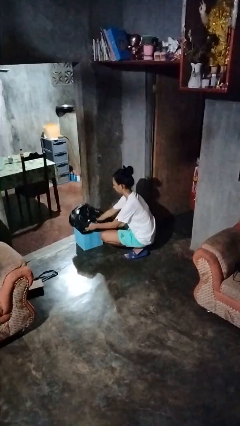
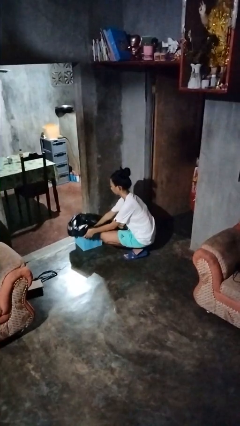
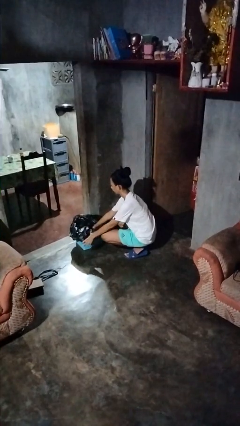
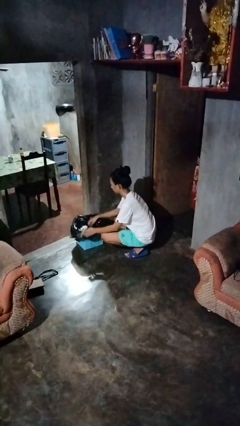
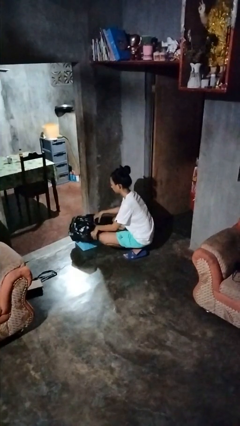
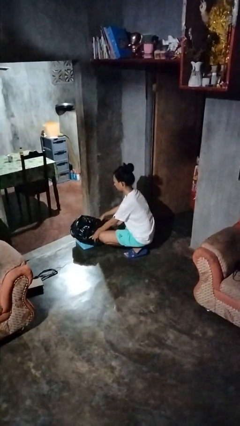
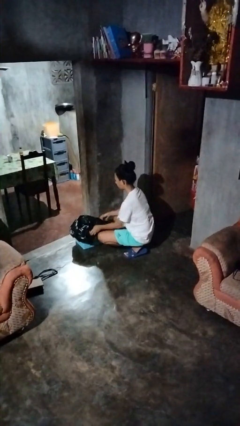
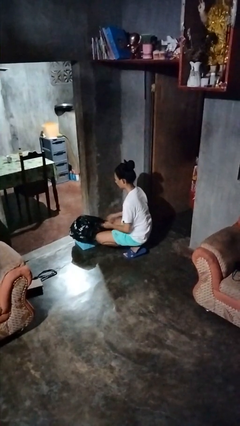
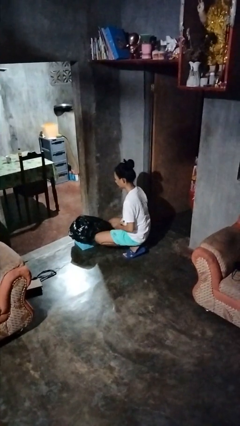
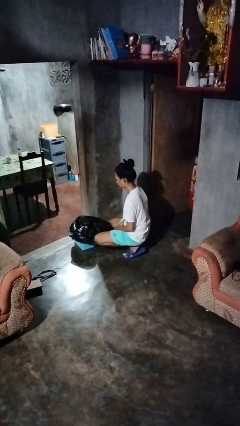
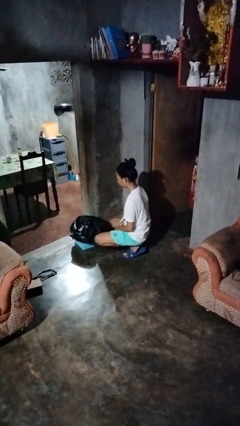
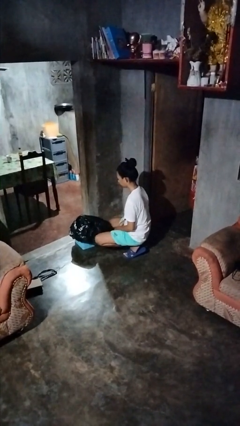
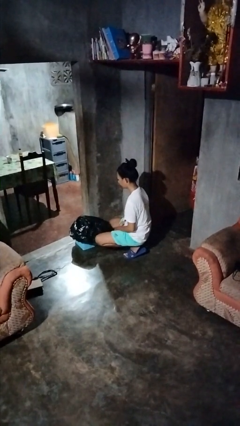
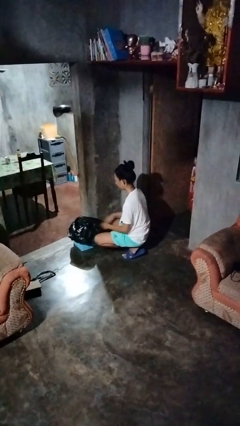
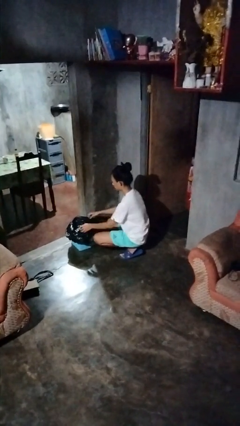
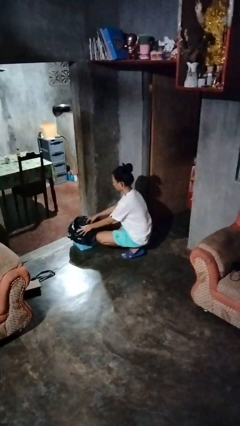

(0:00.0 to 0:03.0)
person inserts trashbag into trashcan

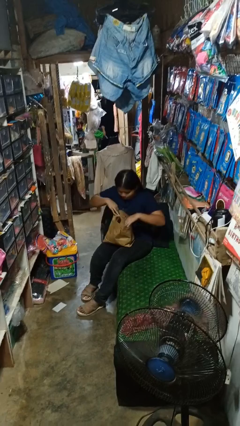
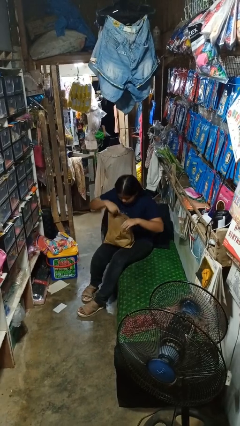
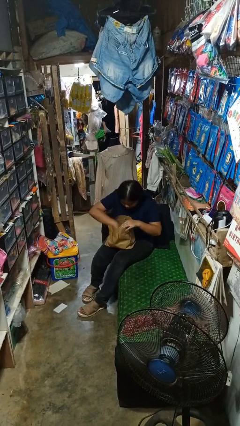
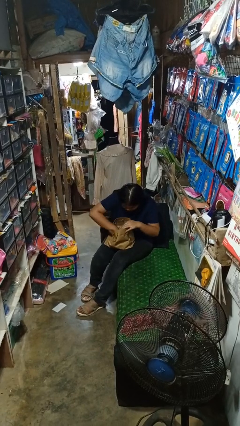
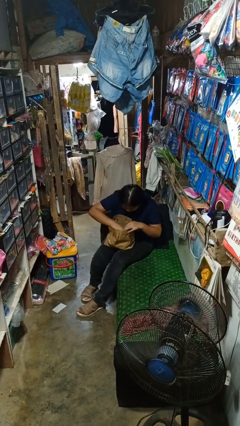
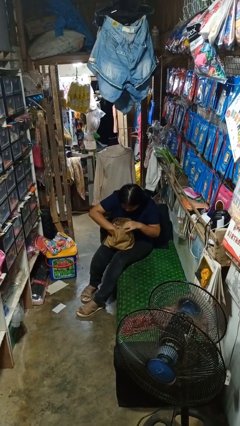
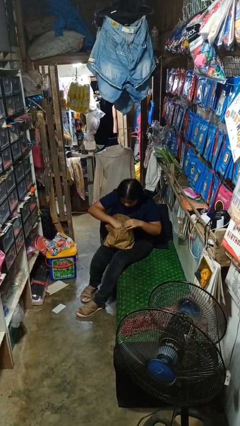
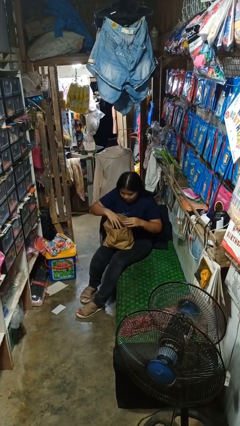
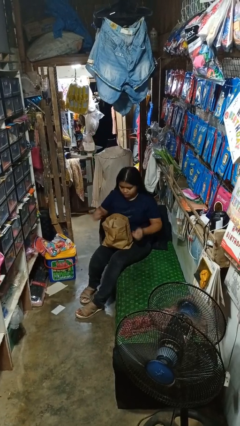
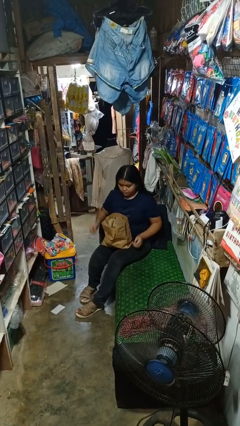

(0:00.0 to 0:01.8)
person searches in bag

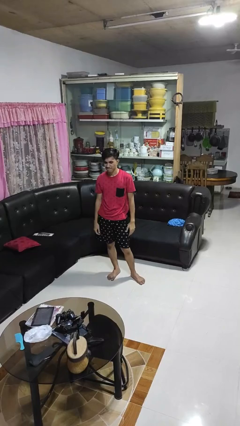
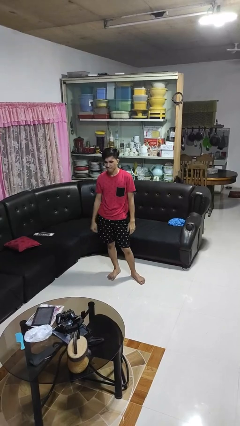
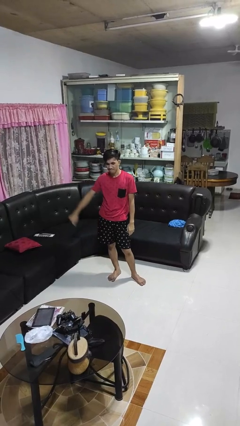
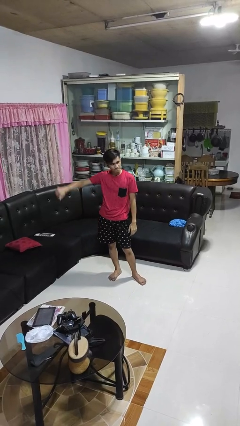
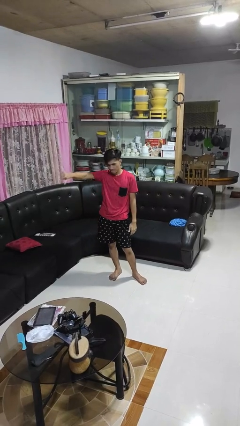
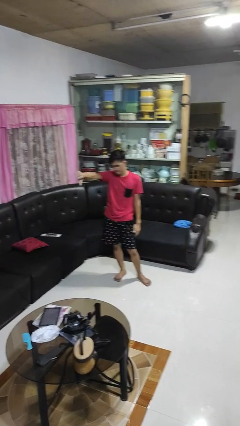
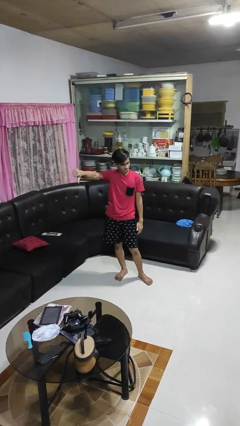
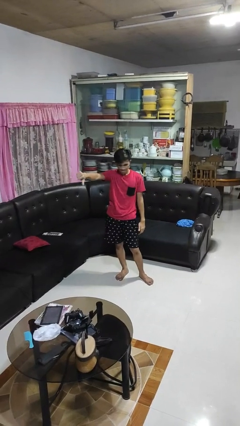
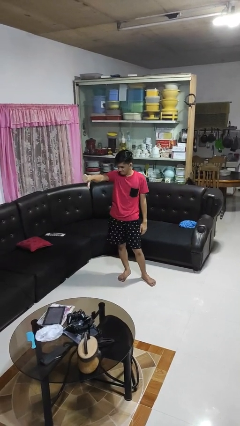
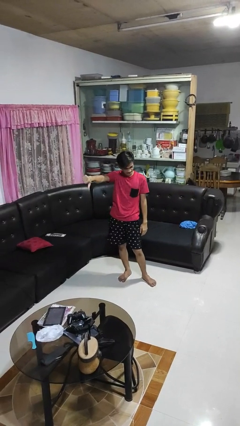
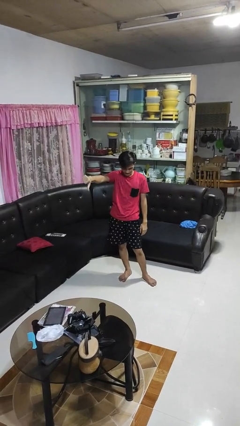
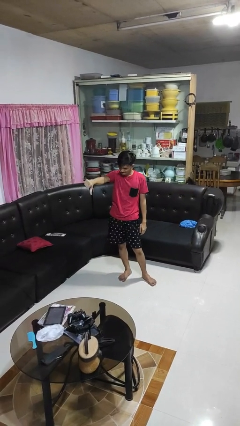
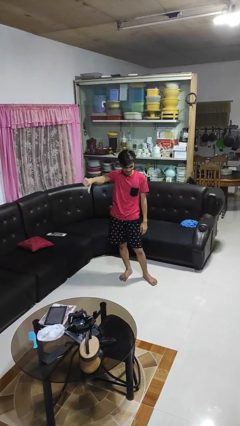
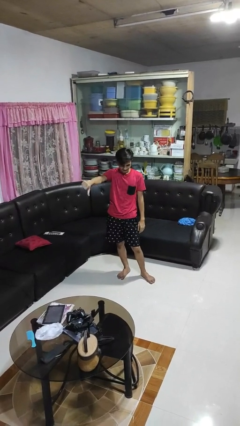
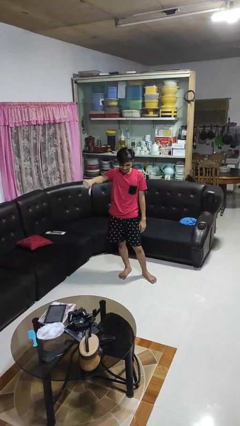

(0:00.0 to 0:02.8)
person gestures thumbs down

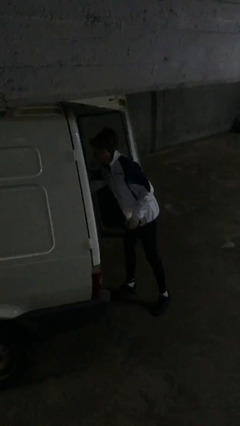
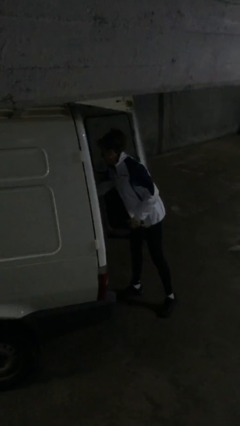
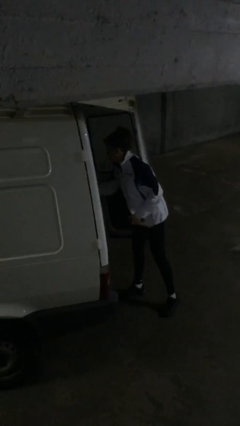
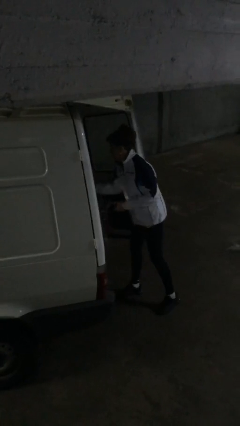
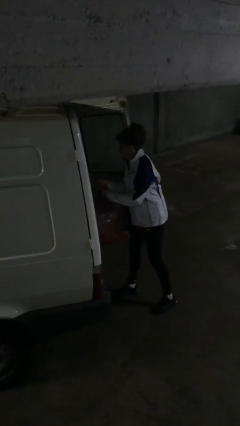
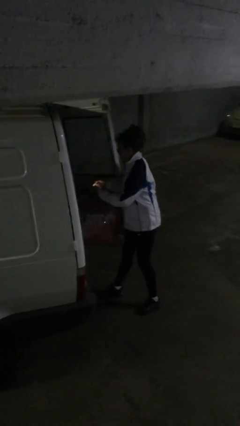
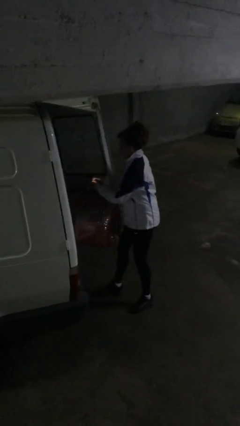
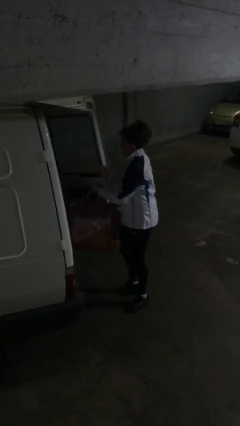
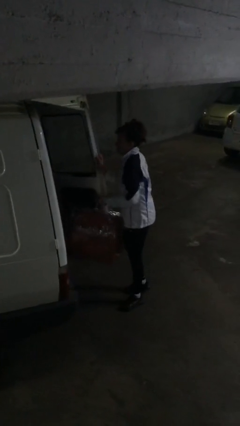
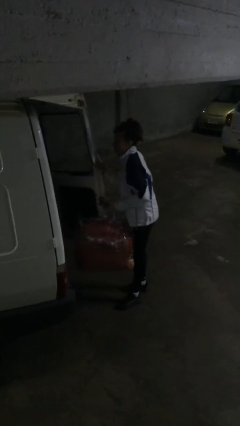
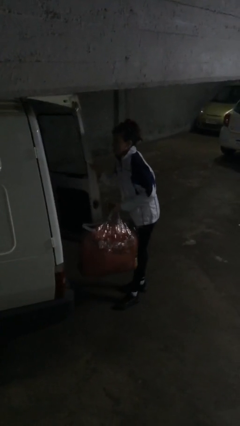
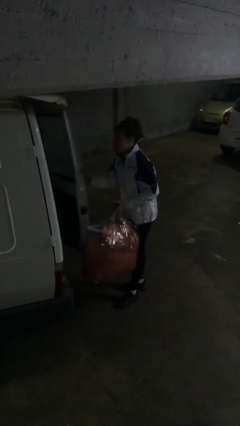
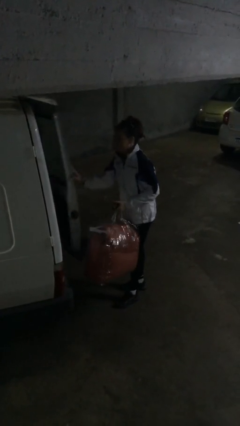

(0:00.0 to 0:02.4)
person unloads car

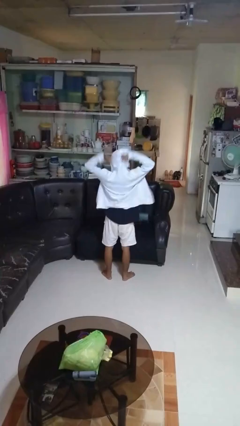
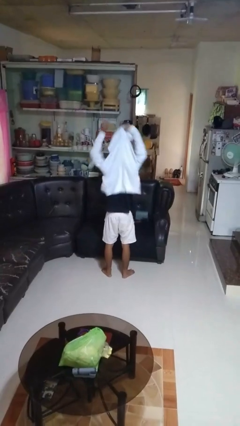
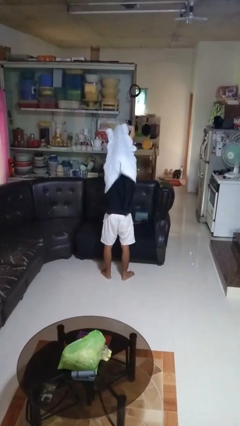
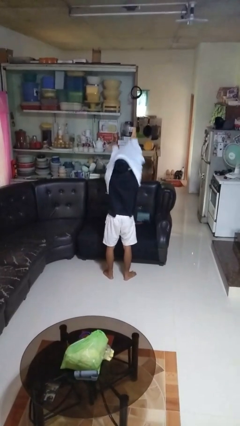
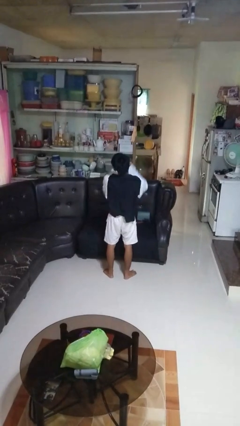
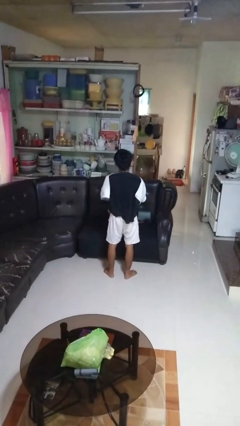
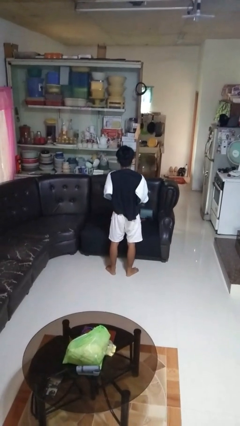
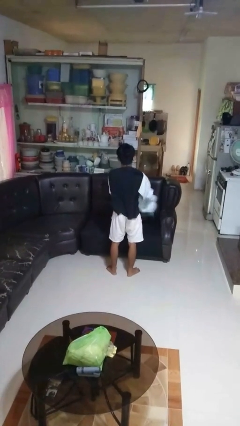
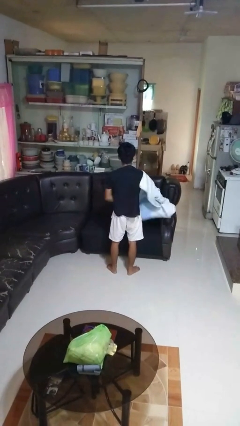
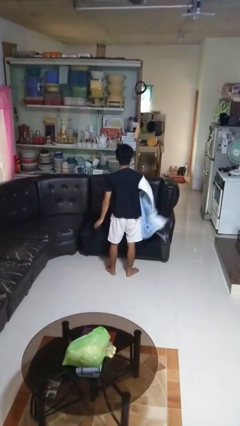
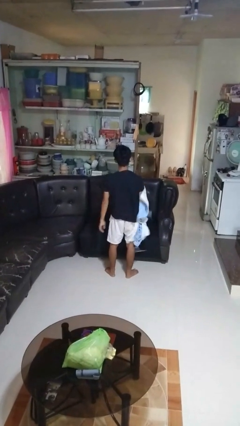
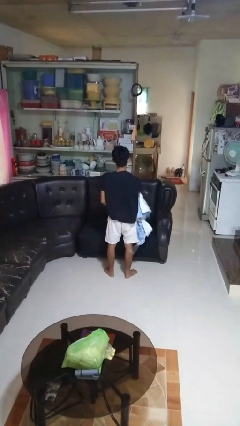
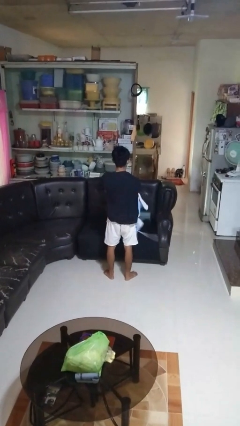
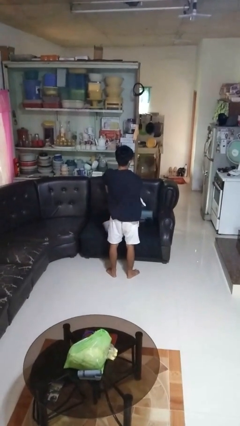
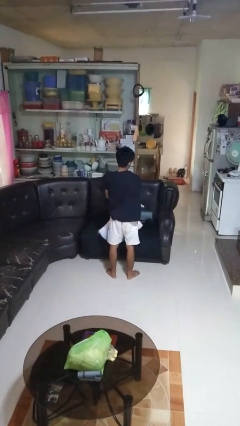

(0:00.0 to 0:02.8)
person takes off hoodie

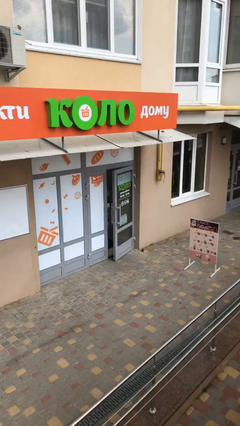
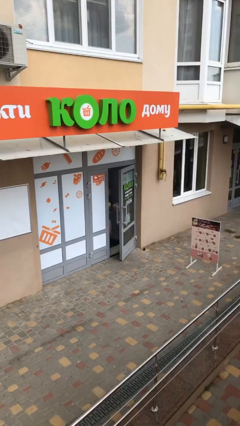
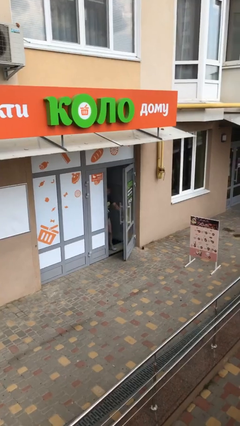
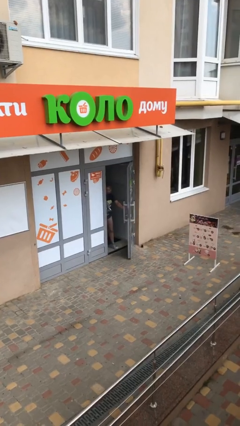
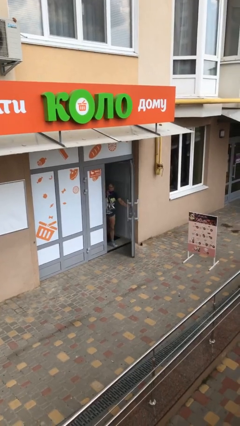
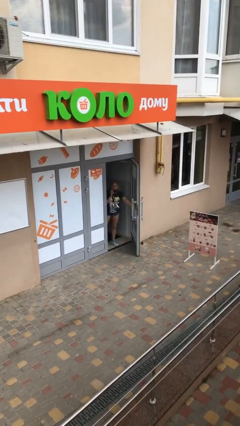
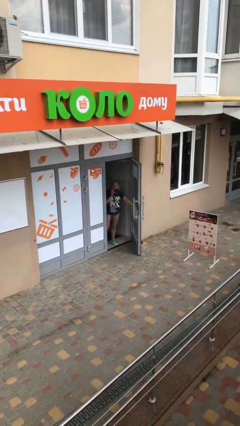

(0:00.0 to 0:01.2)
person opens facility door

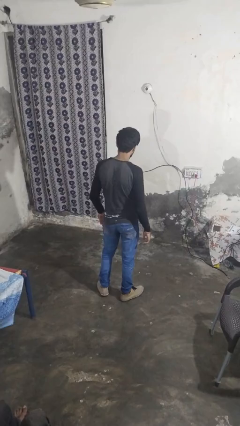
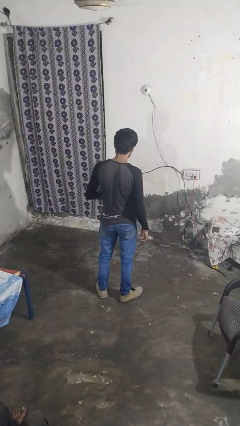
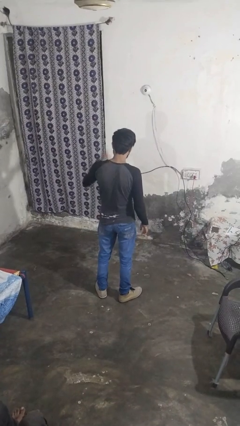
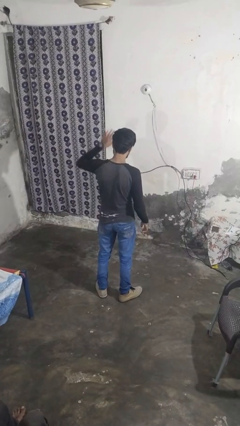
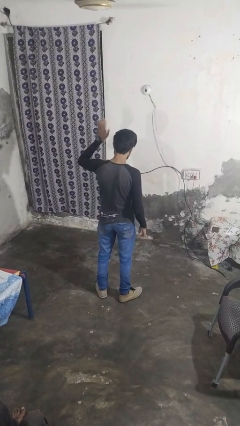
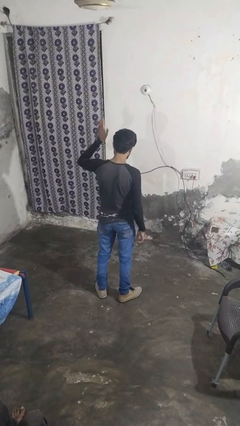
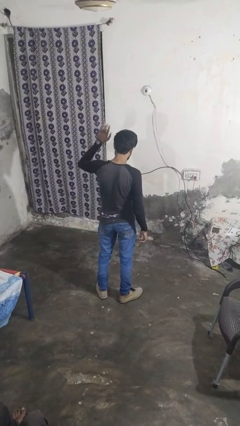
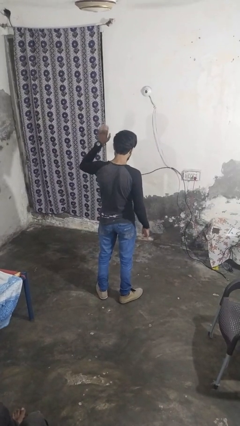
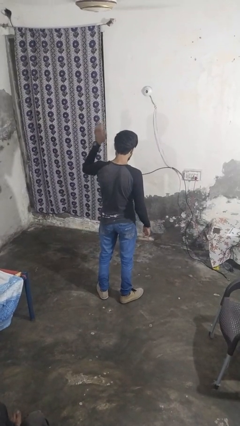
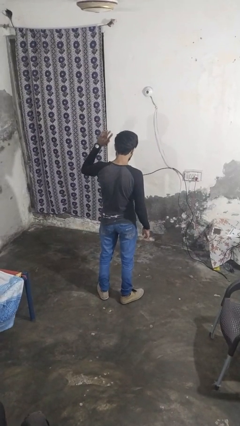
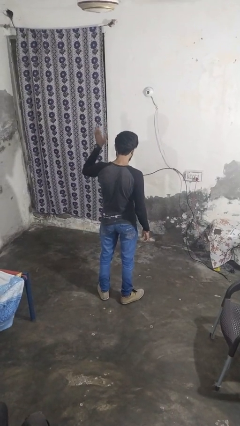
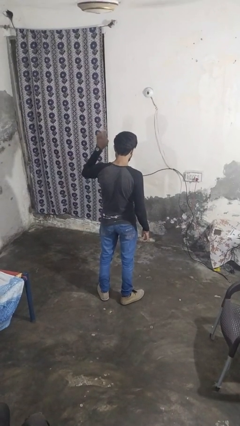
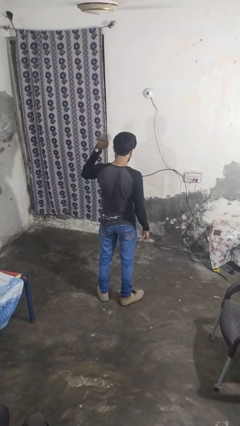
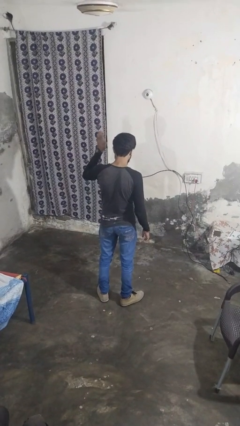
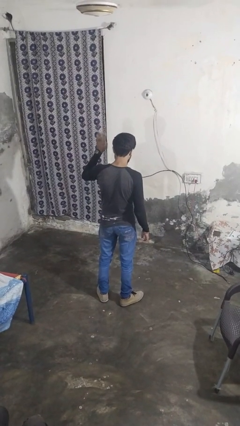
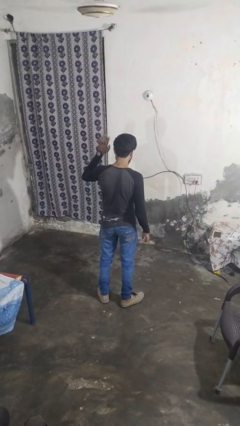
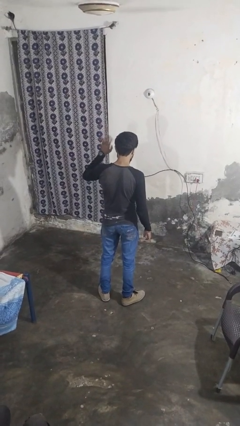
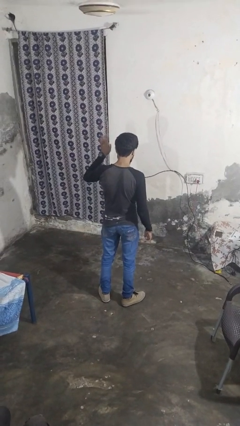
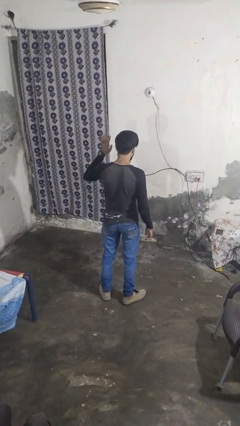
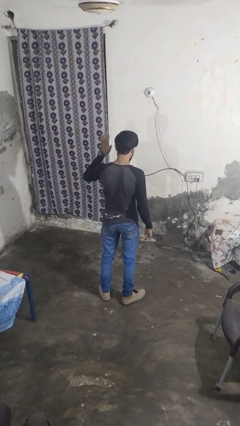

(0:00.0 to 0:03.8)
person waves at person
